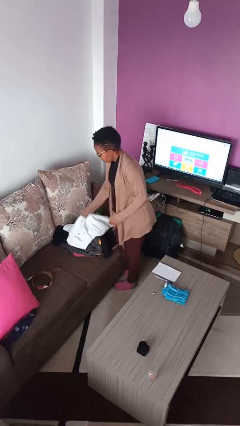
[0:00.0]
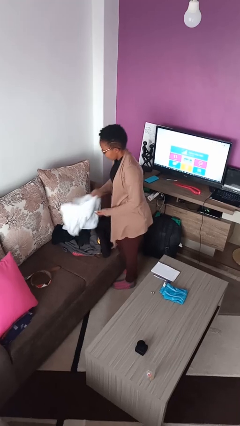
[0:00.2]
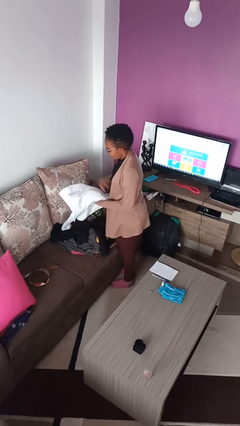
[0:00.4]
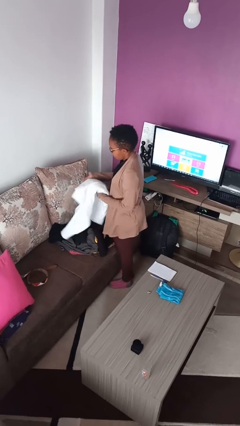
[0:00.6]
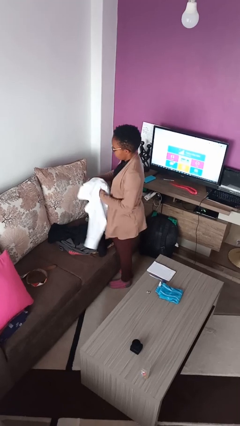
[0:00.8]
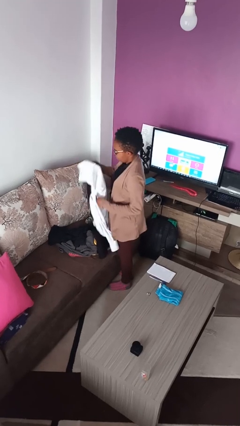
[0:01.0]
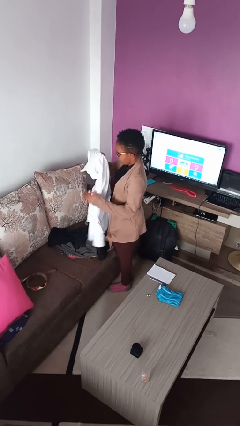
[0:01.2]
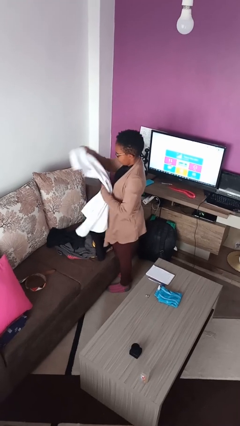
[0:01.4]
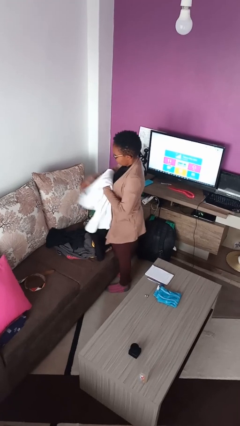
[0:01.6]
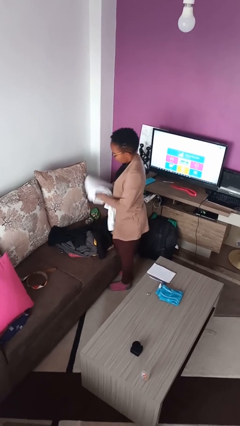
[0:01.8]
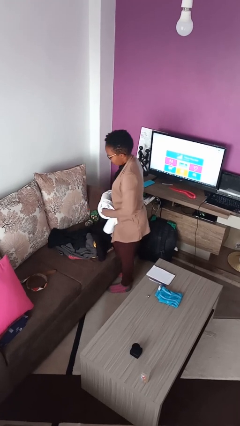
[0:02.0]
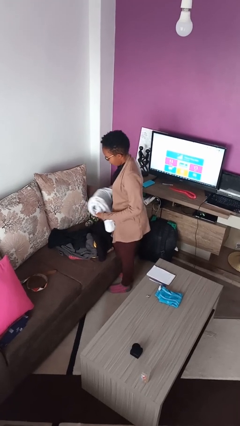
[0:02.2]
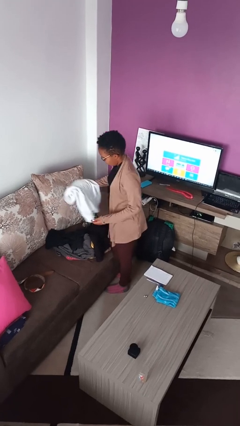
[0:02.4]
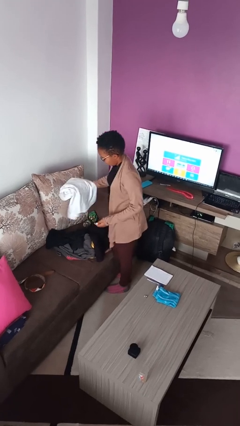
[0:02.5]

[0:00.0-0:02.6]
person folds shirt

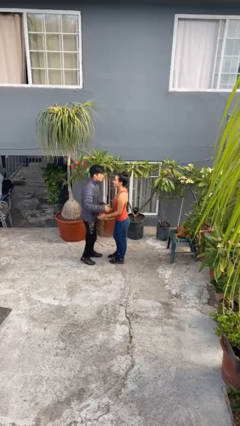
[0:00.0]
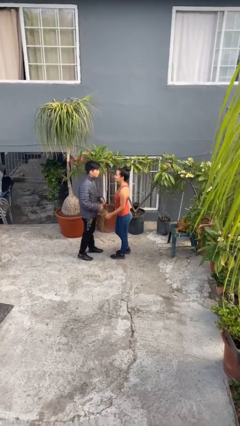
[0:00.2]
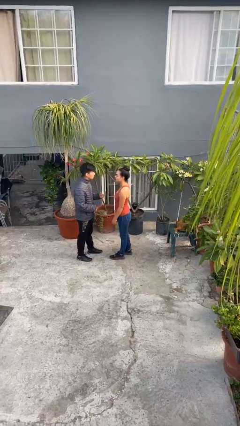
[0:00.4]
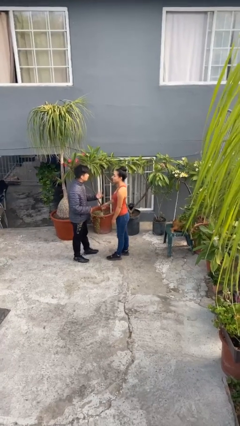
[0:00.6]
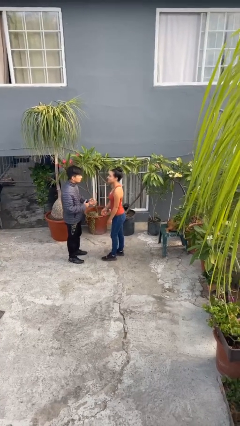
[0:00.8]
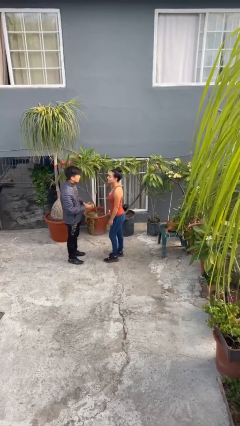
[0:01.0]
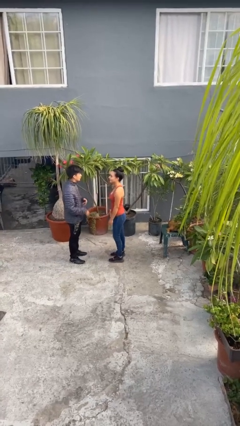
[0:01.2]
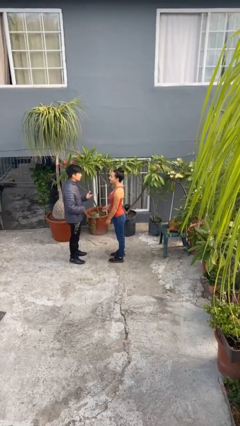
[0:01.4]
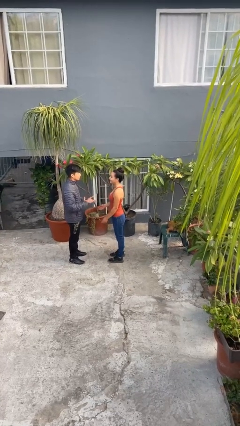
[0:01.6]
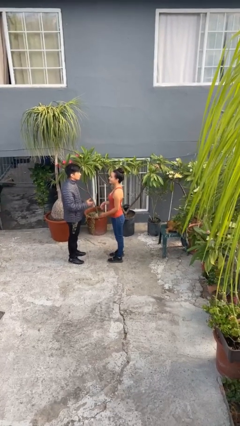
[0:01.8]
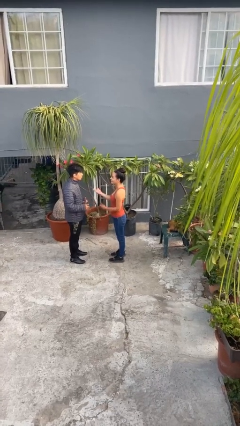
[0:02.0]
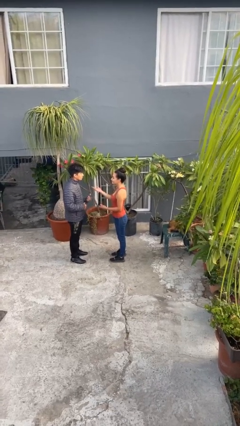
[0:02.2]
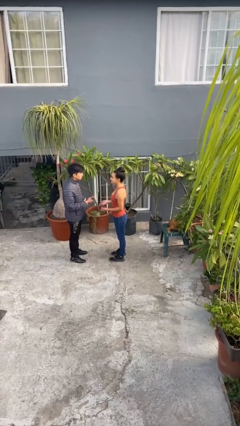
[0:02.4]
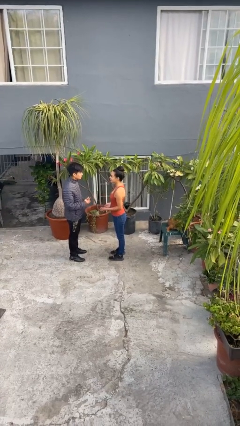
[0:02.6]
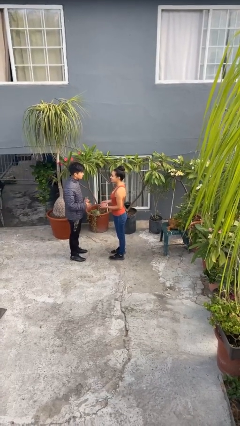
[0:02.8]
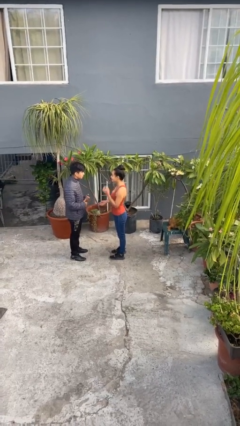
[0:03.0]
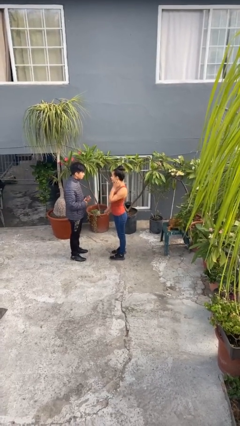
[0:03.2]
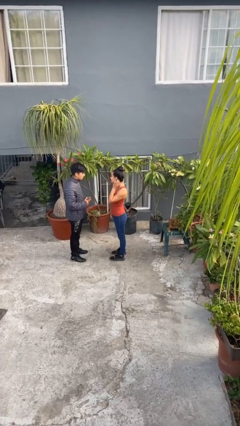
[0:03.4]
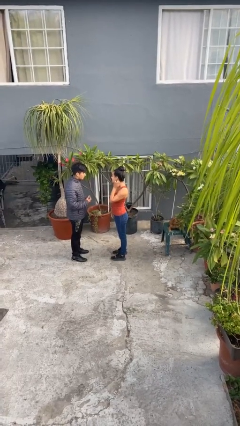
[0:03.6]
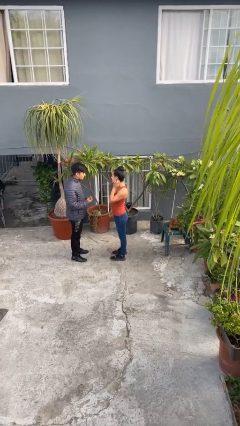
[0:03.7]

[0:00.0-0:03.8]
person talks to person

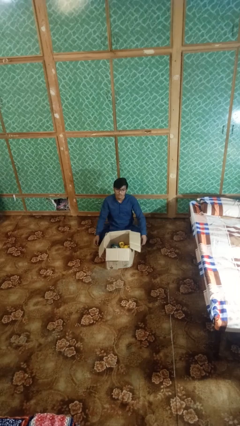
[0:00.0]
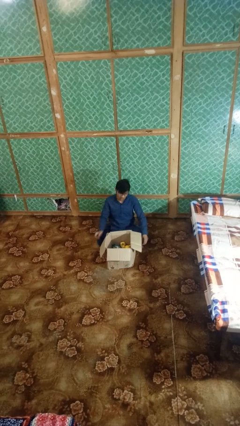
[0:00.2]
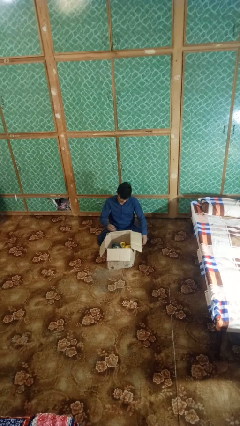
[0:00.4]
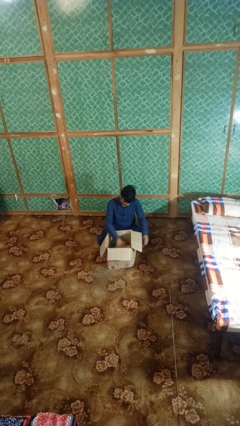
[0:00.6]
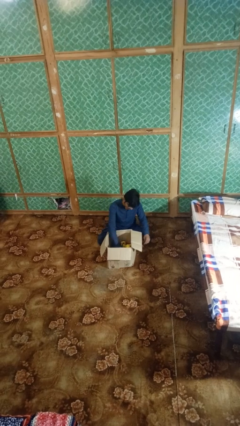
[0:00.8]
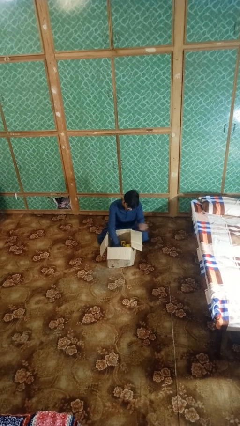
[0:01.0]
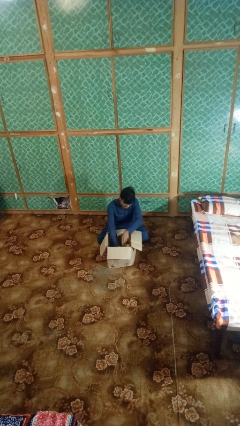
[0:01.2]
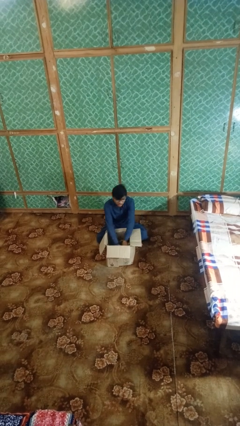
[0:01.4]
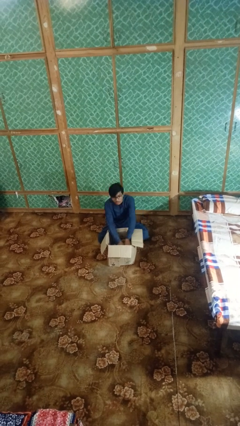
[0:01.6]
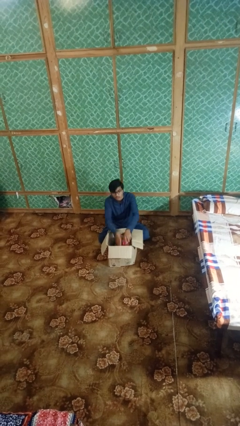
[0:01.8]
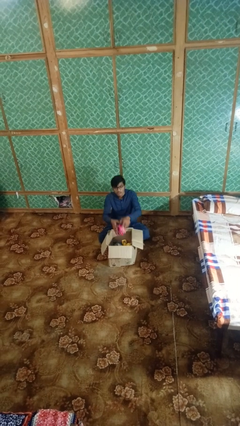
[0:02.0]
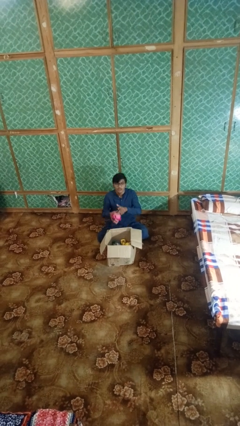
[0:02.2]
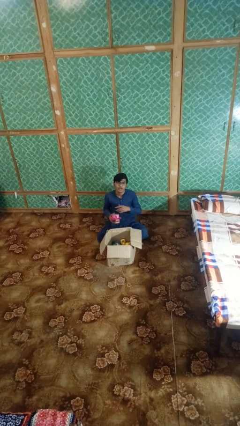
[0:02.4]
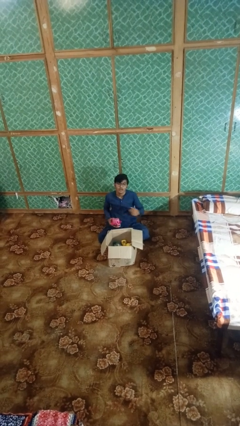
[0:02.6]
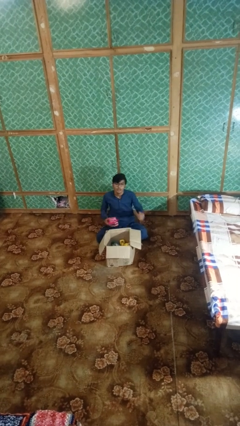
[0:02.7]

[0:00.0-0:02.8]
person takes object from box

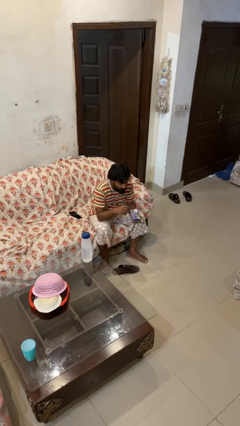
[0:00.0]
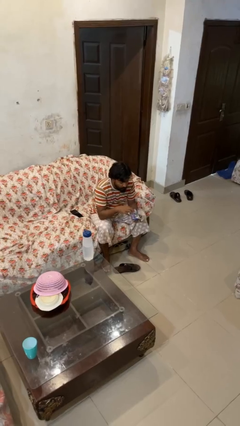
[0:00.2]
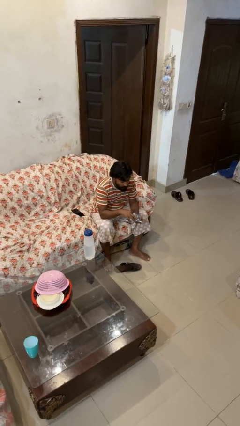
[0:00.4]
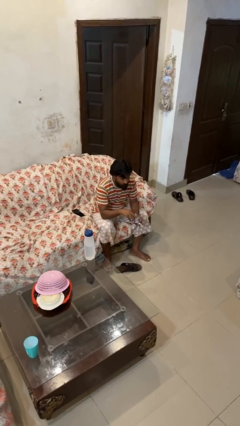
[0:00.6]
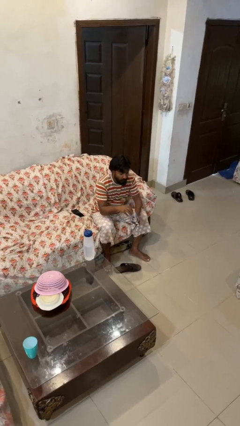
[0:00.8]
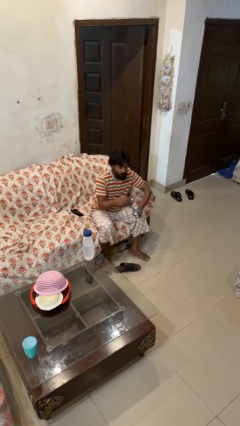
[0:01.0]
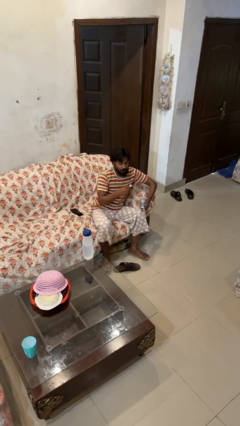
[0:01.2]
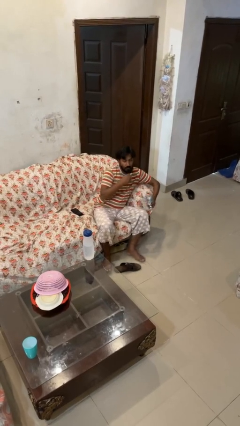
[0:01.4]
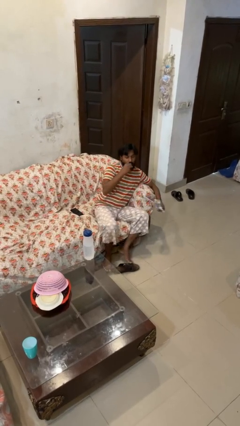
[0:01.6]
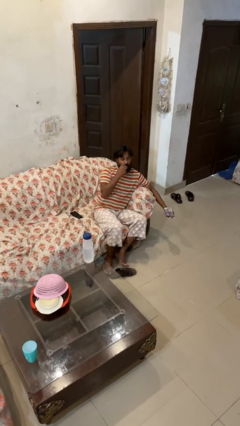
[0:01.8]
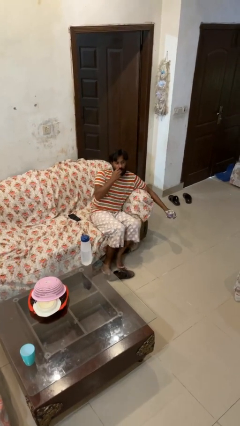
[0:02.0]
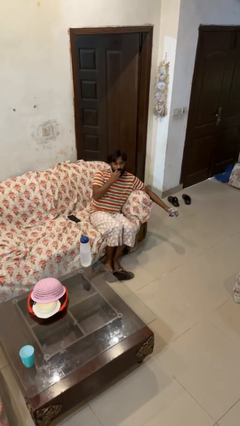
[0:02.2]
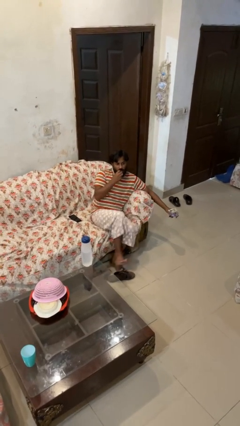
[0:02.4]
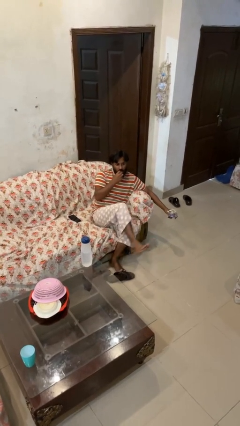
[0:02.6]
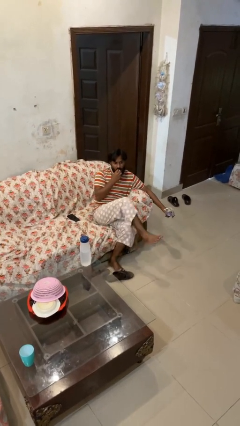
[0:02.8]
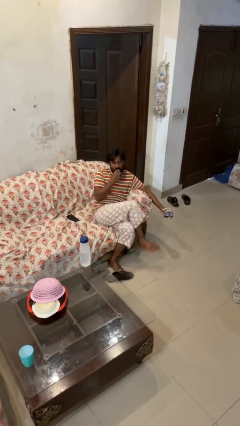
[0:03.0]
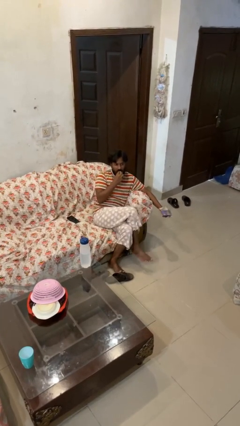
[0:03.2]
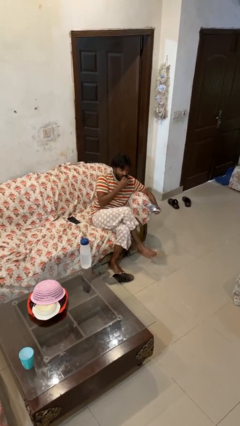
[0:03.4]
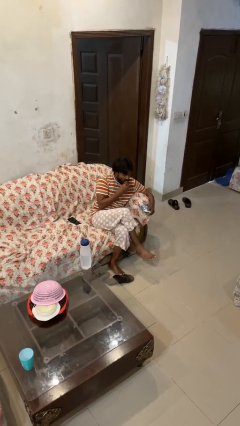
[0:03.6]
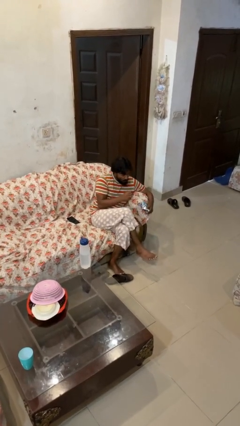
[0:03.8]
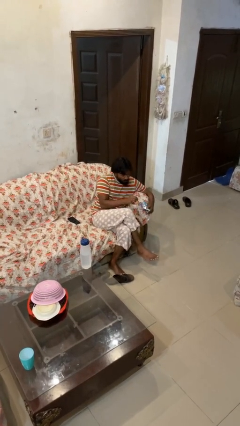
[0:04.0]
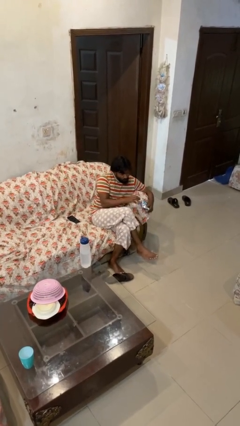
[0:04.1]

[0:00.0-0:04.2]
person eats snack from bag

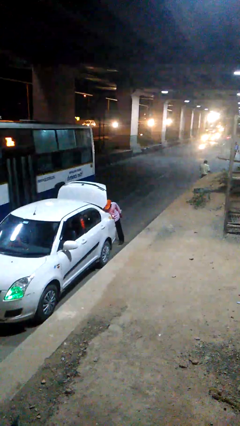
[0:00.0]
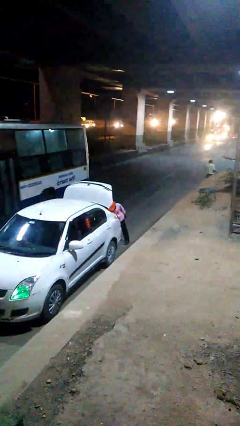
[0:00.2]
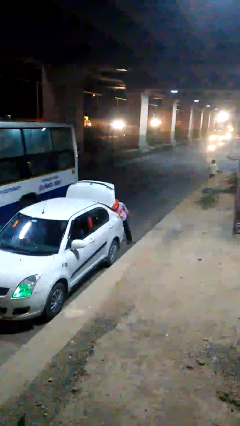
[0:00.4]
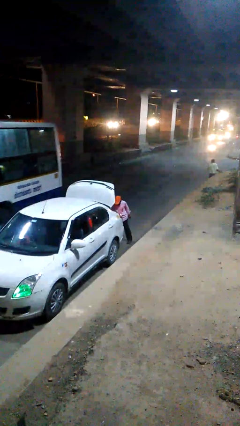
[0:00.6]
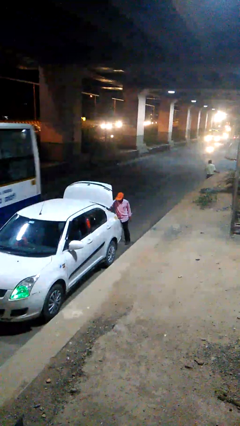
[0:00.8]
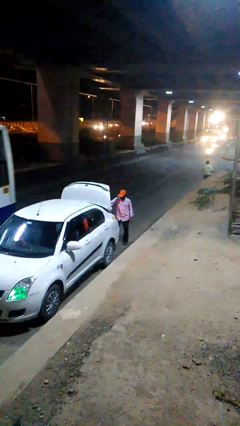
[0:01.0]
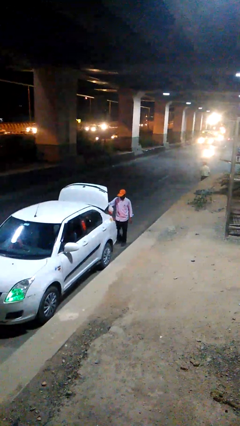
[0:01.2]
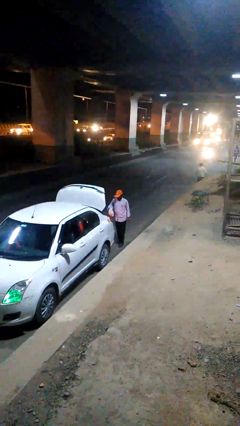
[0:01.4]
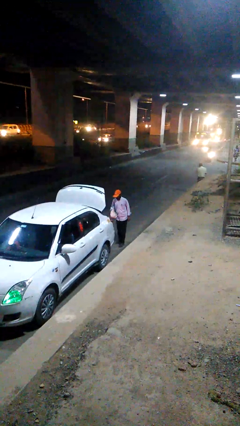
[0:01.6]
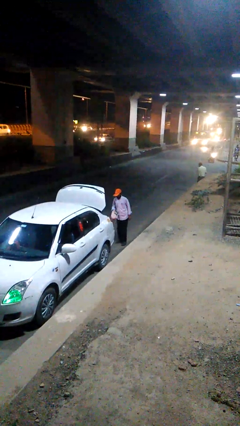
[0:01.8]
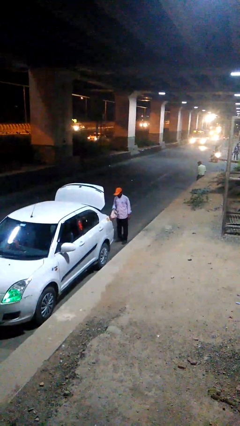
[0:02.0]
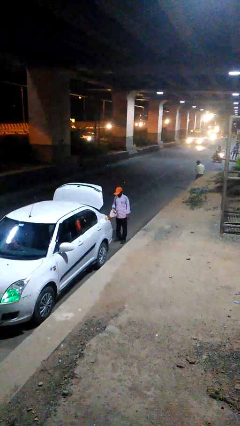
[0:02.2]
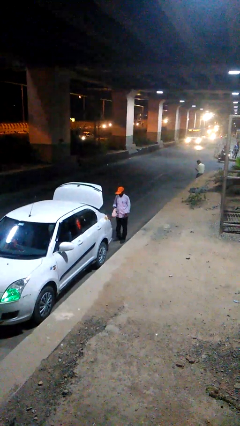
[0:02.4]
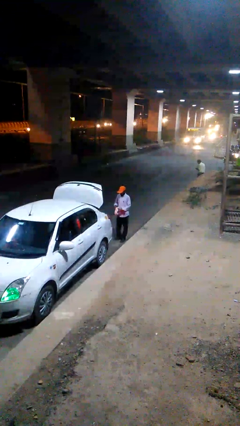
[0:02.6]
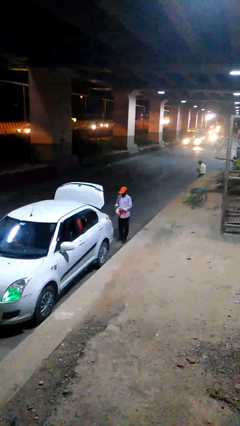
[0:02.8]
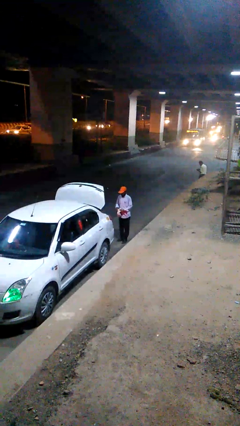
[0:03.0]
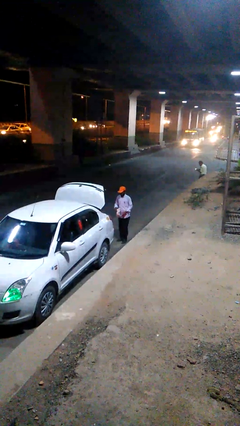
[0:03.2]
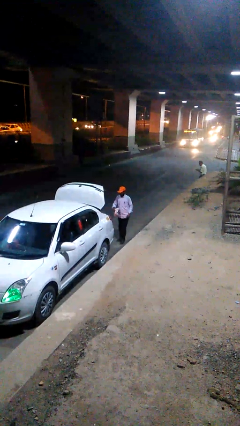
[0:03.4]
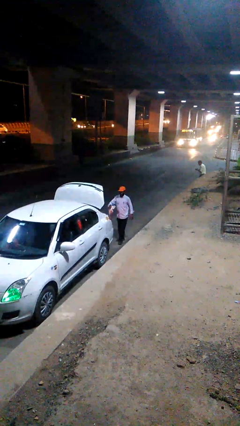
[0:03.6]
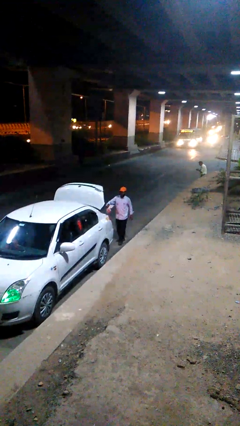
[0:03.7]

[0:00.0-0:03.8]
person unloads car
